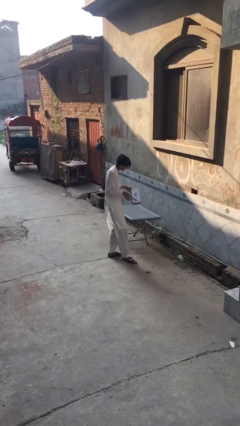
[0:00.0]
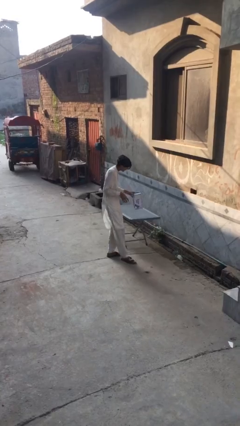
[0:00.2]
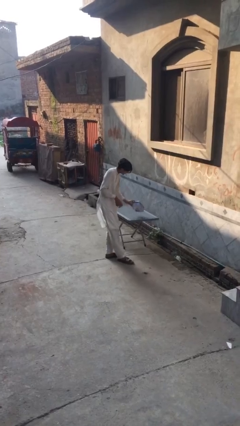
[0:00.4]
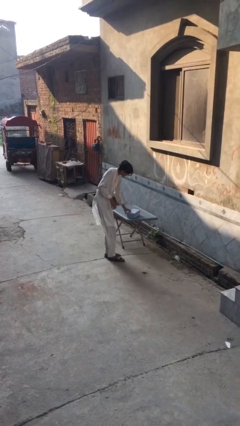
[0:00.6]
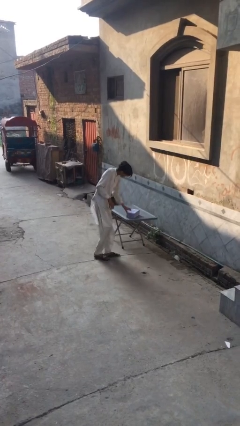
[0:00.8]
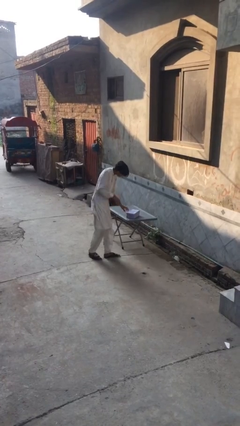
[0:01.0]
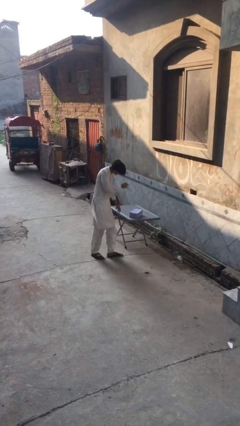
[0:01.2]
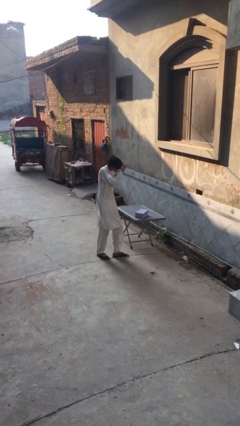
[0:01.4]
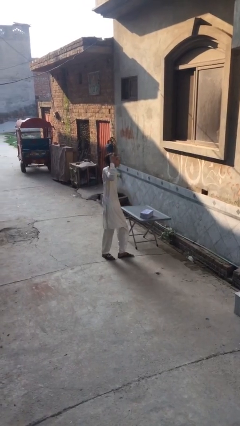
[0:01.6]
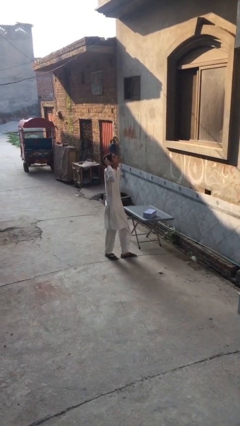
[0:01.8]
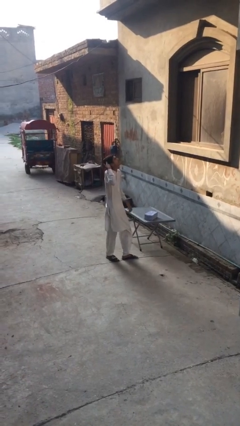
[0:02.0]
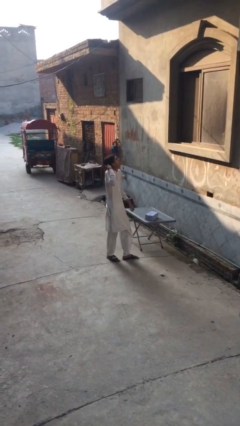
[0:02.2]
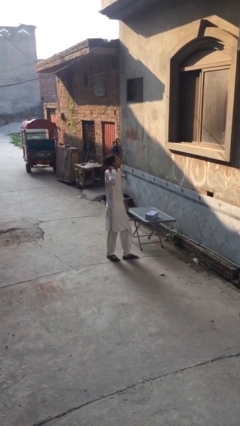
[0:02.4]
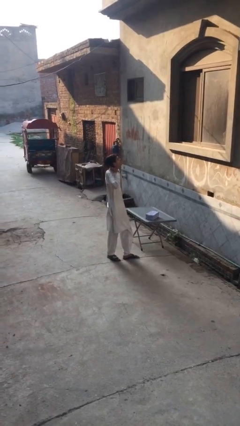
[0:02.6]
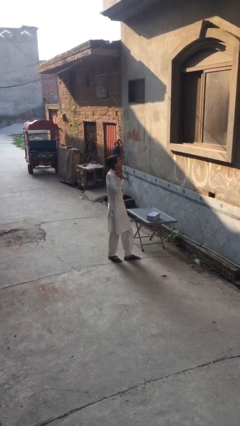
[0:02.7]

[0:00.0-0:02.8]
person puts down object on table

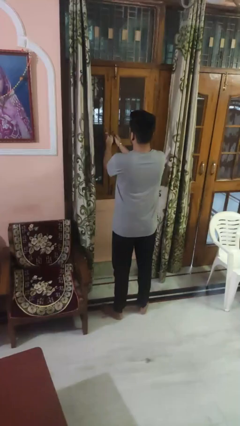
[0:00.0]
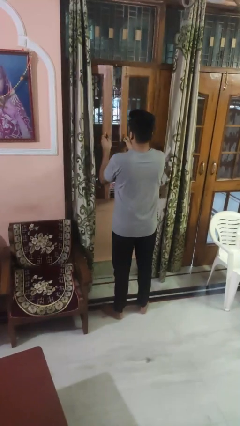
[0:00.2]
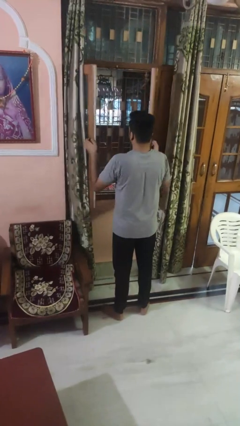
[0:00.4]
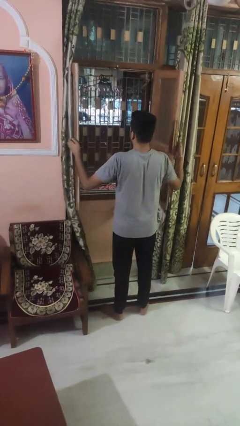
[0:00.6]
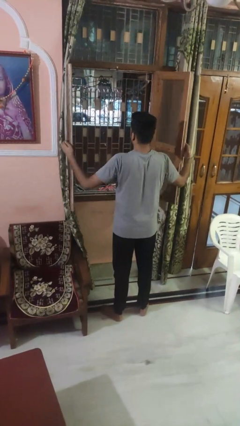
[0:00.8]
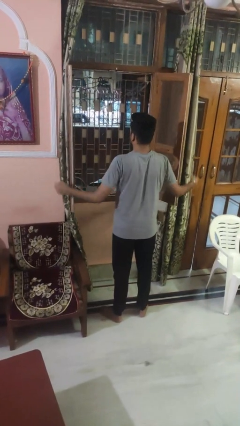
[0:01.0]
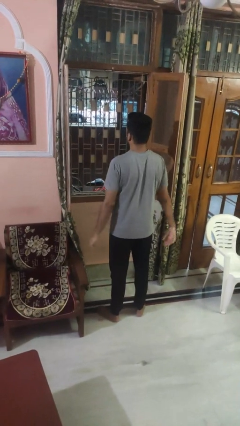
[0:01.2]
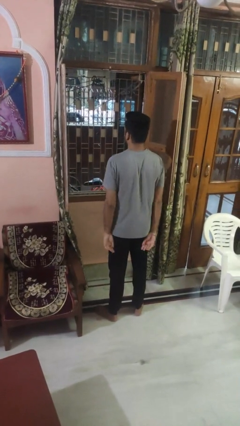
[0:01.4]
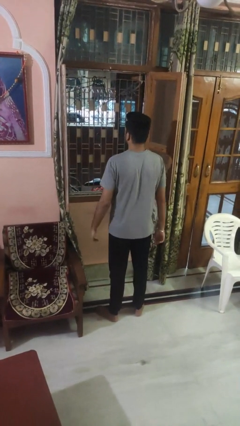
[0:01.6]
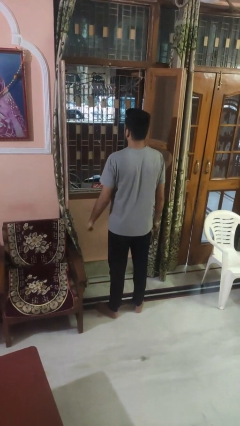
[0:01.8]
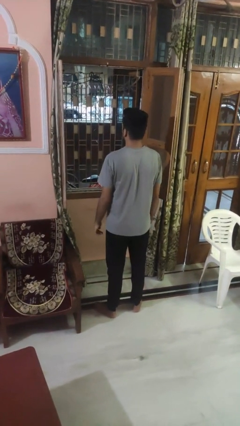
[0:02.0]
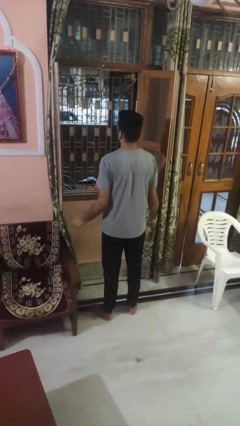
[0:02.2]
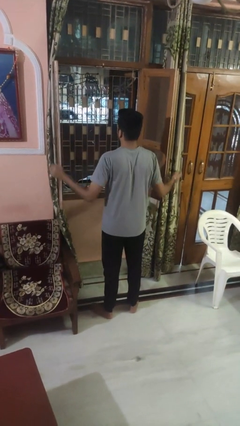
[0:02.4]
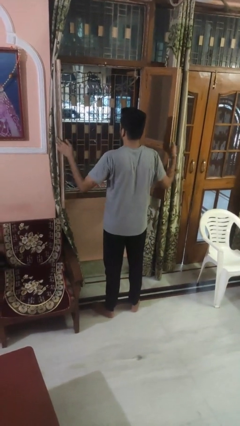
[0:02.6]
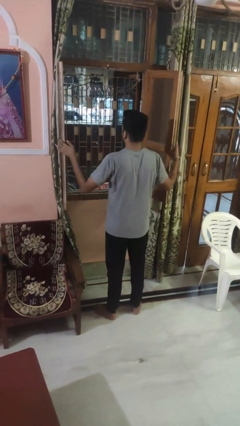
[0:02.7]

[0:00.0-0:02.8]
person opens home window

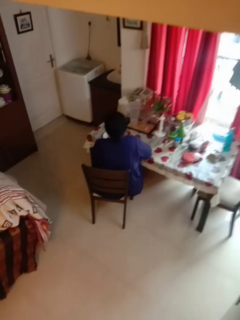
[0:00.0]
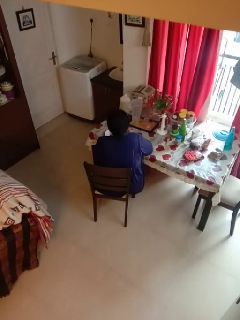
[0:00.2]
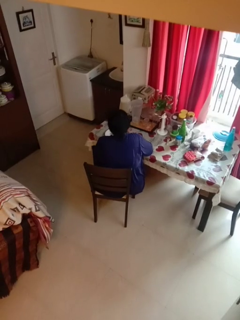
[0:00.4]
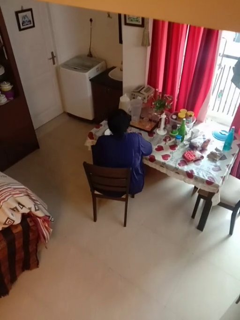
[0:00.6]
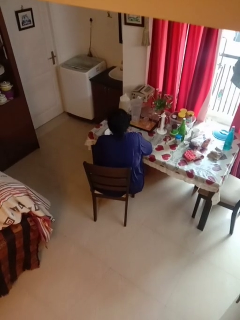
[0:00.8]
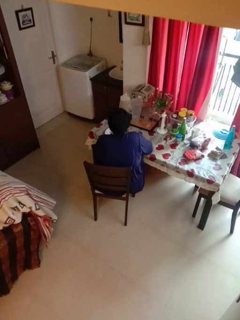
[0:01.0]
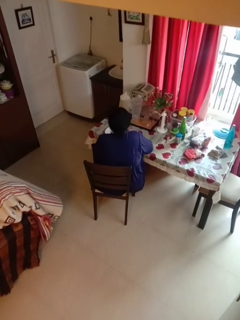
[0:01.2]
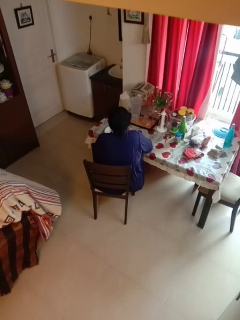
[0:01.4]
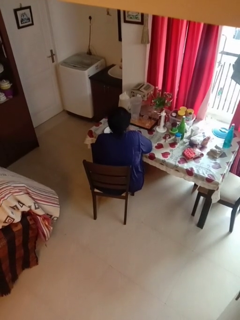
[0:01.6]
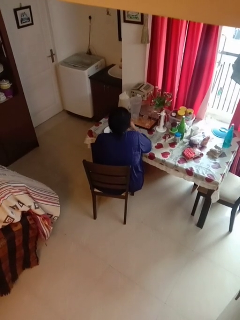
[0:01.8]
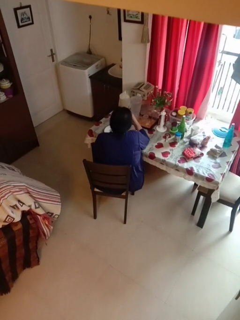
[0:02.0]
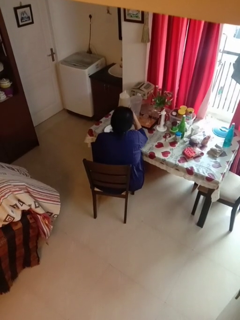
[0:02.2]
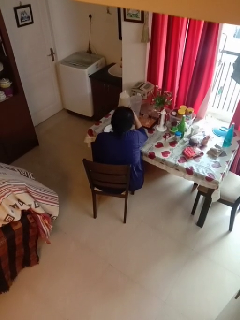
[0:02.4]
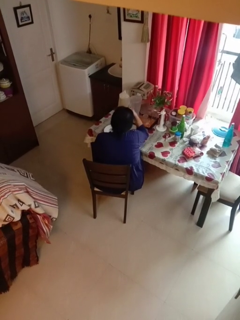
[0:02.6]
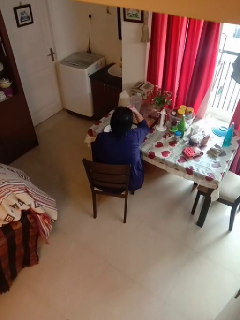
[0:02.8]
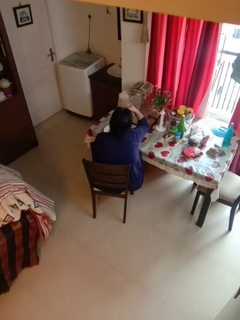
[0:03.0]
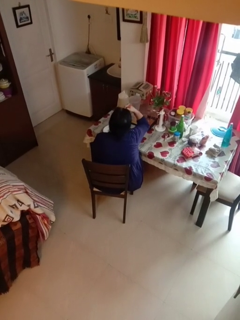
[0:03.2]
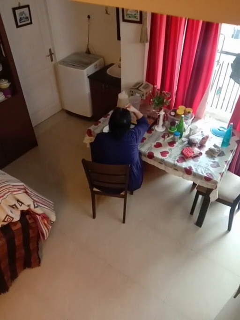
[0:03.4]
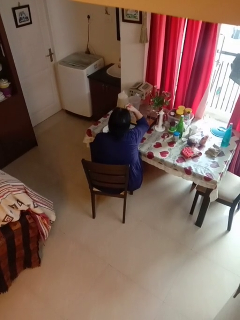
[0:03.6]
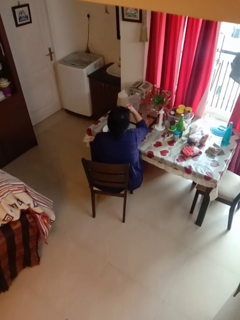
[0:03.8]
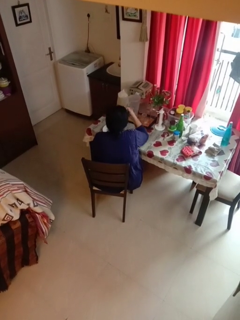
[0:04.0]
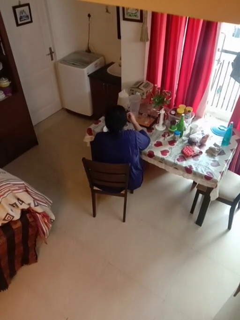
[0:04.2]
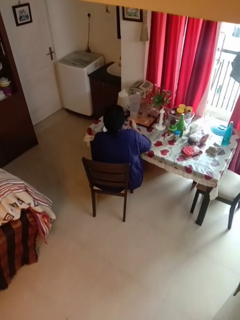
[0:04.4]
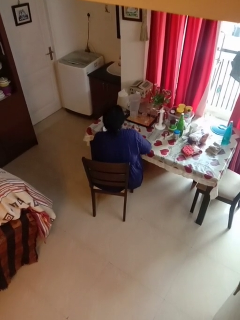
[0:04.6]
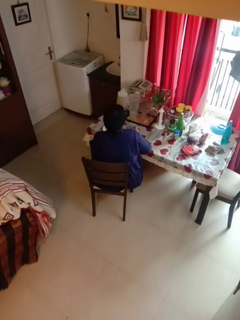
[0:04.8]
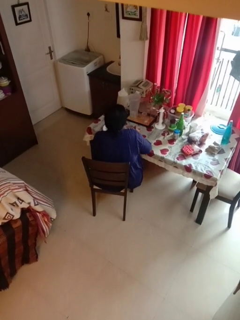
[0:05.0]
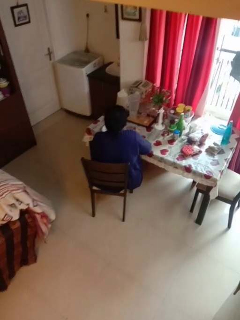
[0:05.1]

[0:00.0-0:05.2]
person eats with utensil

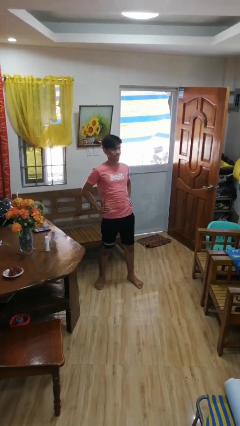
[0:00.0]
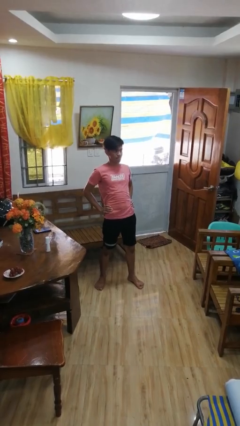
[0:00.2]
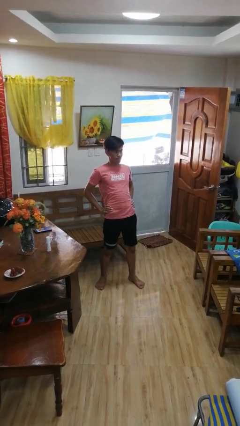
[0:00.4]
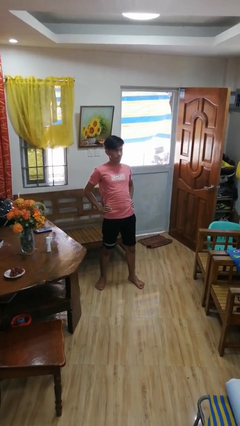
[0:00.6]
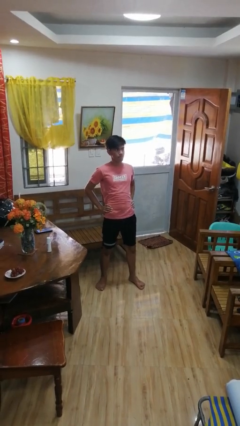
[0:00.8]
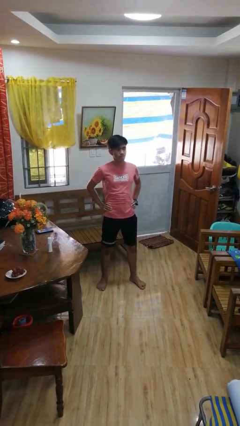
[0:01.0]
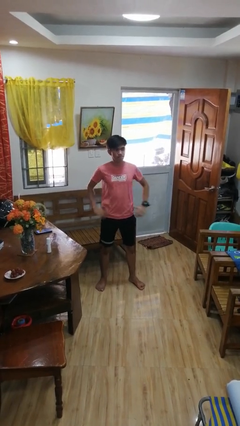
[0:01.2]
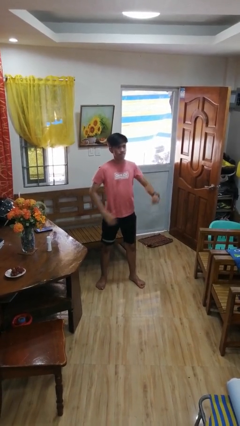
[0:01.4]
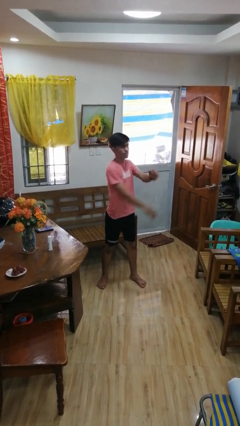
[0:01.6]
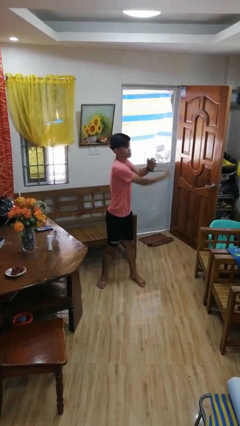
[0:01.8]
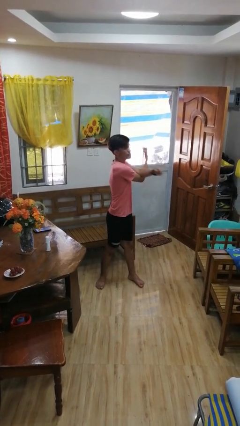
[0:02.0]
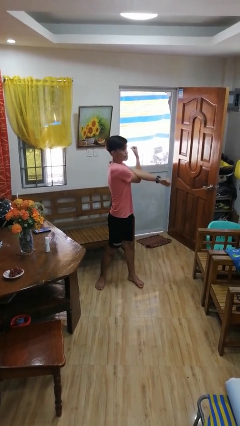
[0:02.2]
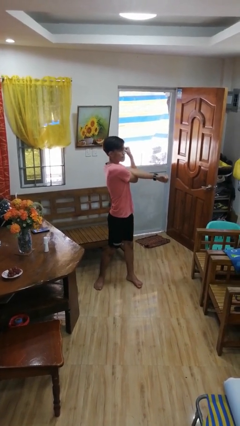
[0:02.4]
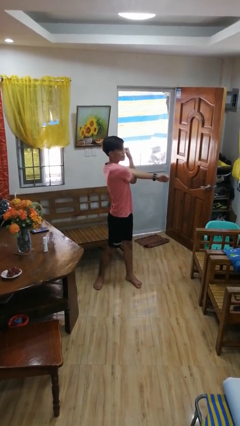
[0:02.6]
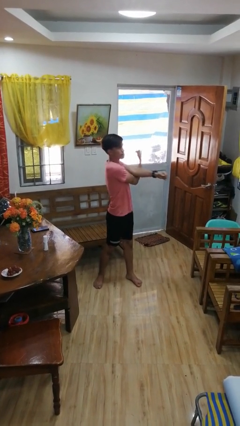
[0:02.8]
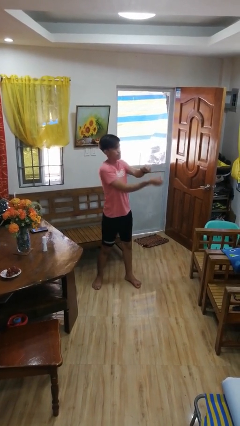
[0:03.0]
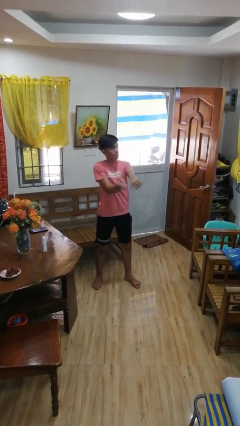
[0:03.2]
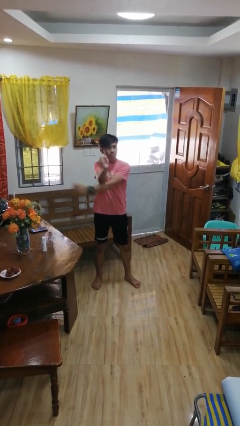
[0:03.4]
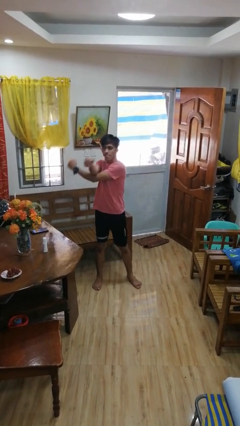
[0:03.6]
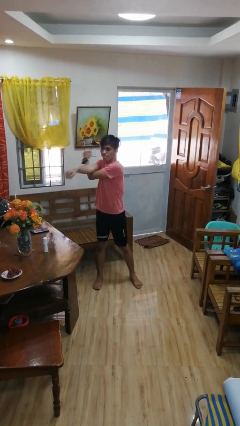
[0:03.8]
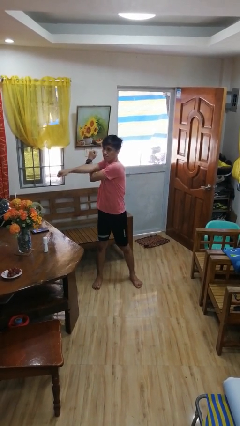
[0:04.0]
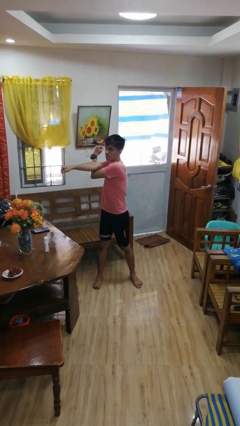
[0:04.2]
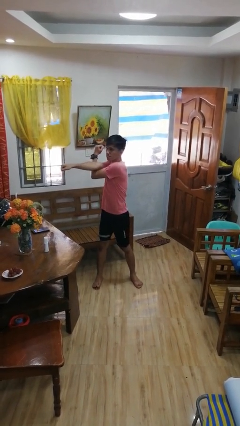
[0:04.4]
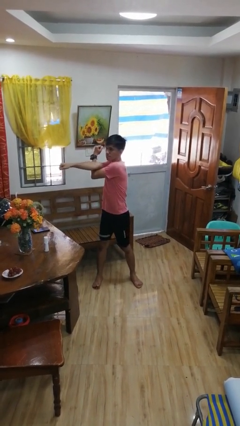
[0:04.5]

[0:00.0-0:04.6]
person stretches arms to side

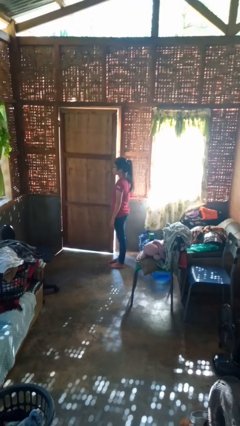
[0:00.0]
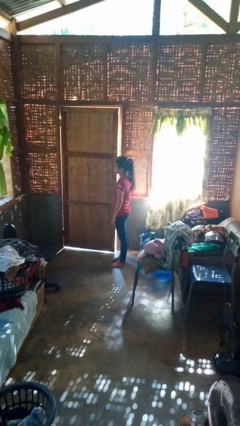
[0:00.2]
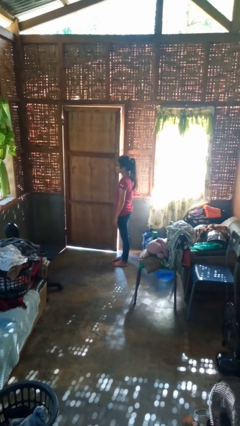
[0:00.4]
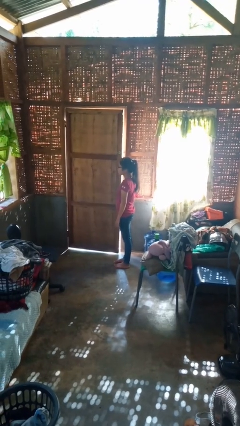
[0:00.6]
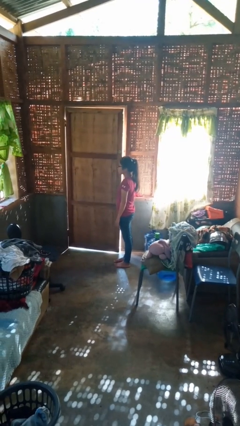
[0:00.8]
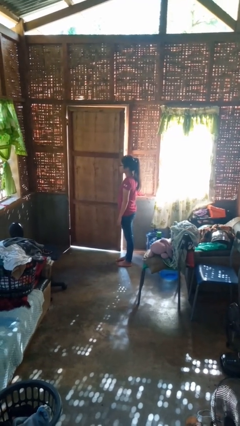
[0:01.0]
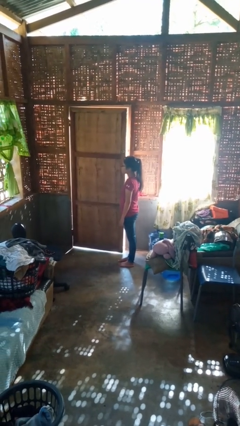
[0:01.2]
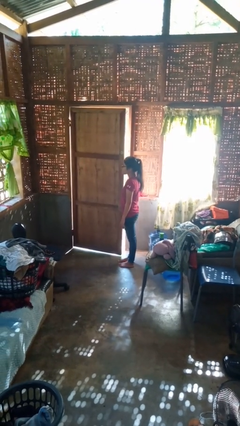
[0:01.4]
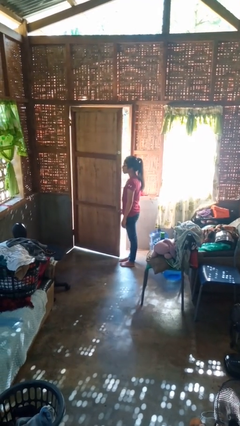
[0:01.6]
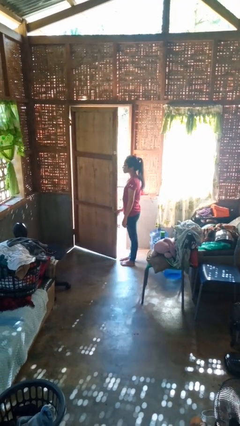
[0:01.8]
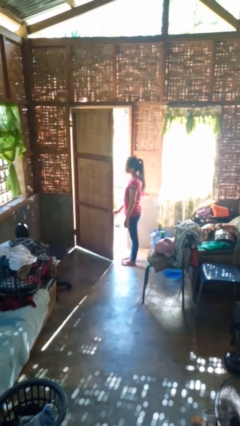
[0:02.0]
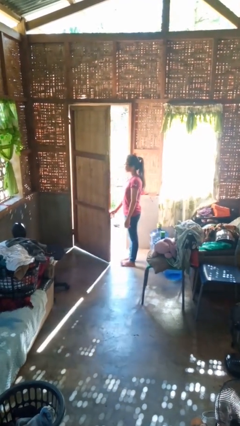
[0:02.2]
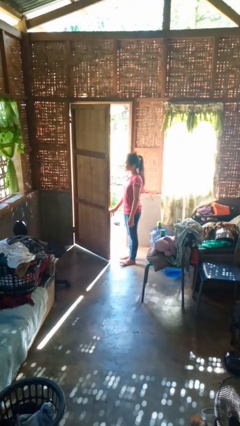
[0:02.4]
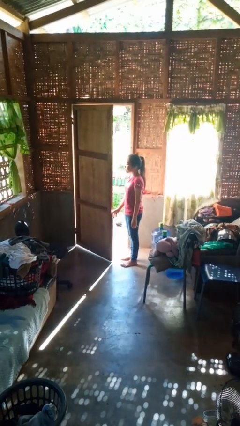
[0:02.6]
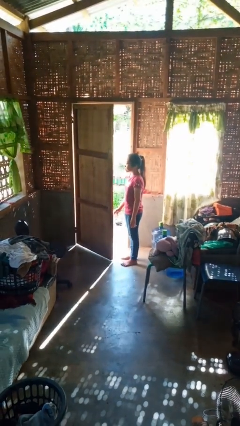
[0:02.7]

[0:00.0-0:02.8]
person opens facility door

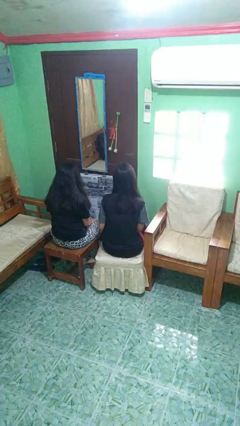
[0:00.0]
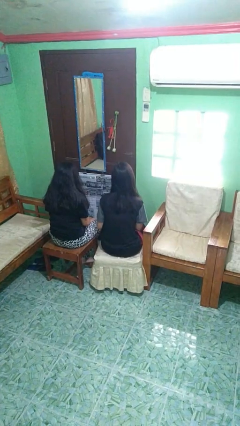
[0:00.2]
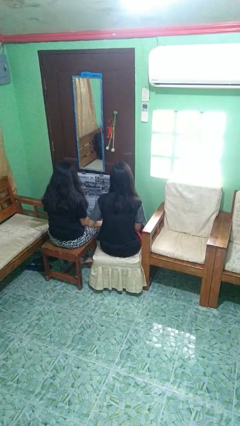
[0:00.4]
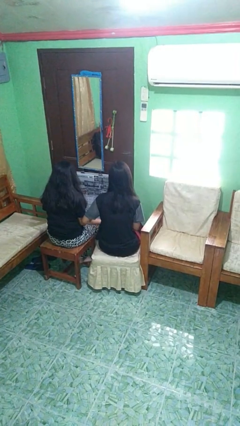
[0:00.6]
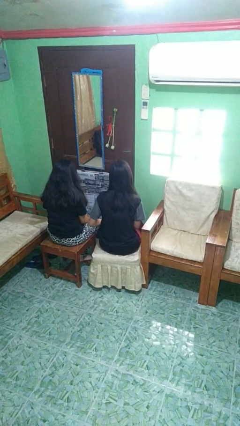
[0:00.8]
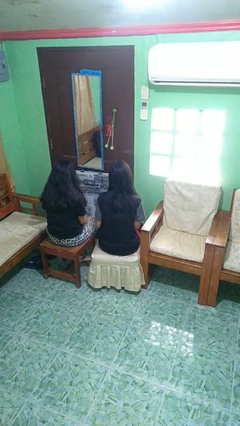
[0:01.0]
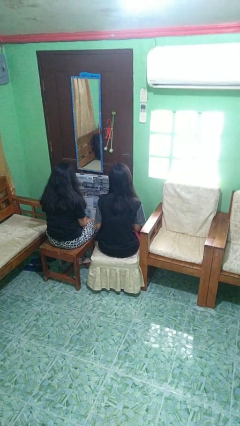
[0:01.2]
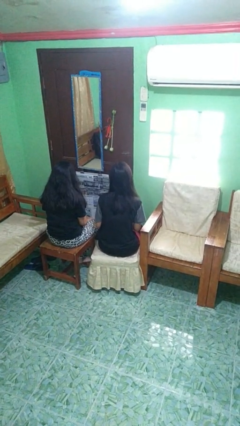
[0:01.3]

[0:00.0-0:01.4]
person nudges person with elbow
